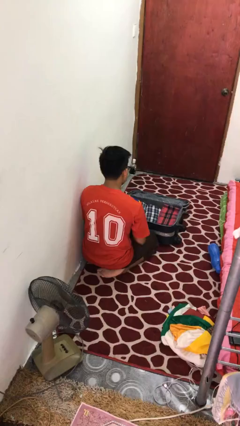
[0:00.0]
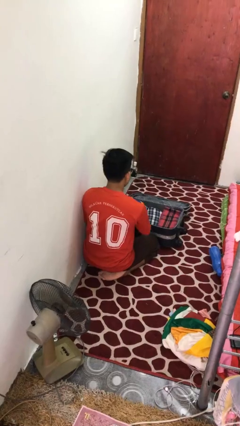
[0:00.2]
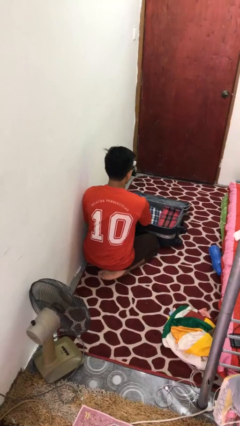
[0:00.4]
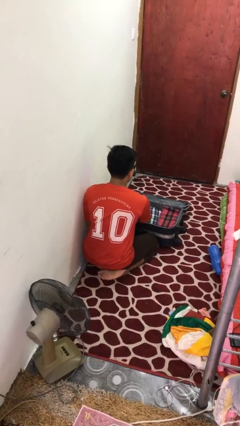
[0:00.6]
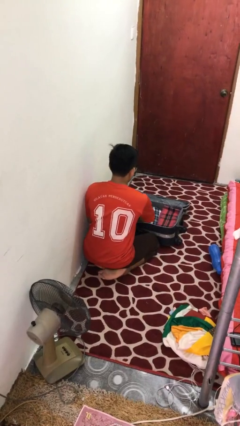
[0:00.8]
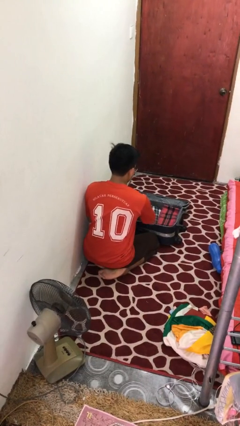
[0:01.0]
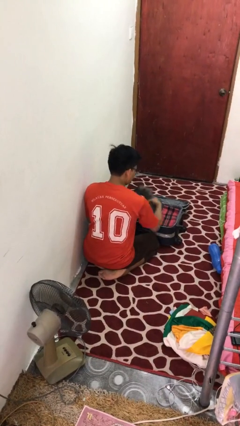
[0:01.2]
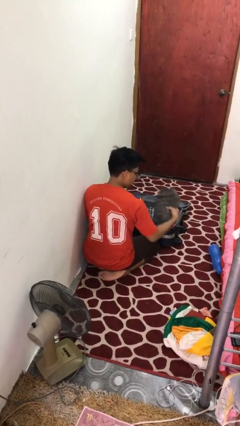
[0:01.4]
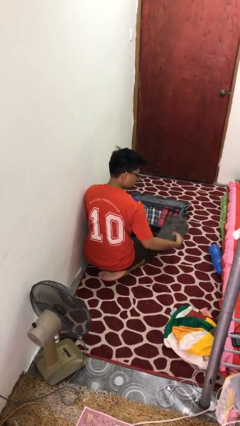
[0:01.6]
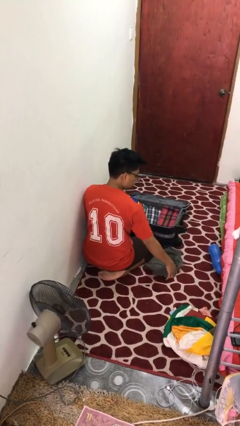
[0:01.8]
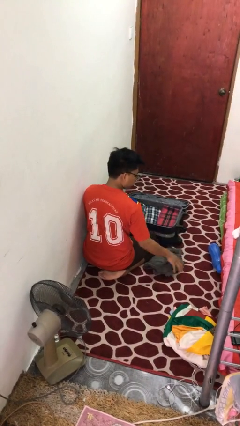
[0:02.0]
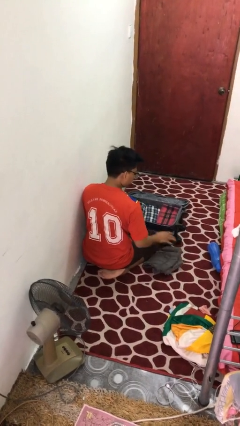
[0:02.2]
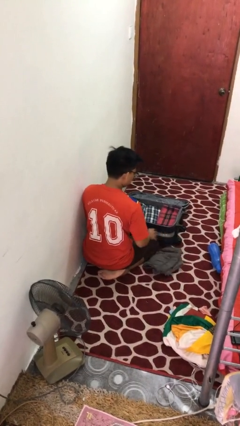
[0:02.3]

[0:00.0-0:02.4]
person unloads clothes from suitcase

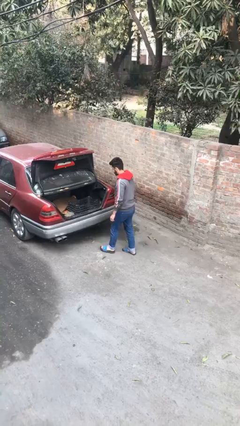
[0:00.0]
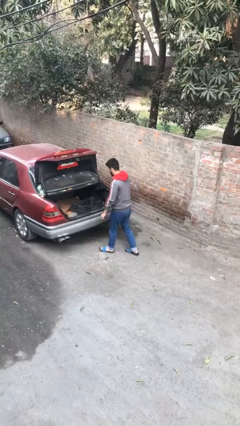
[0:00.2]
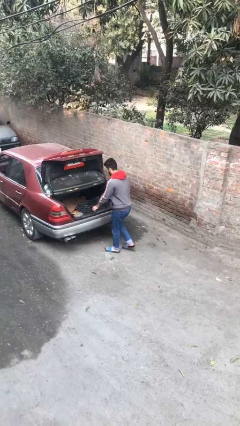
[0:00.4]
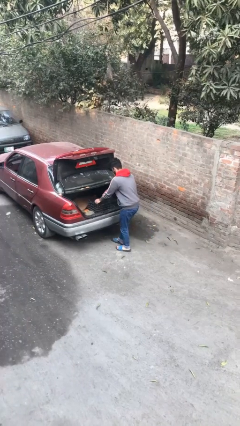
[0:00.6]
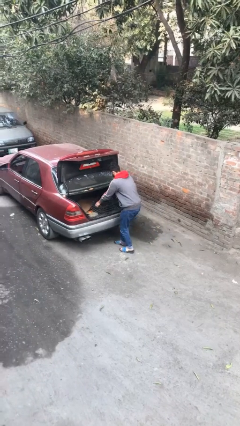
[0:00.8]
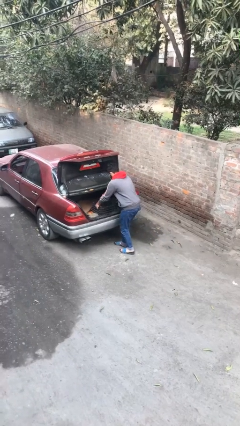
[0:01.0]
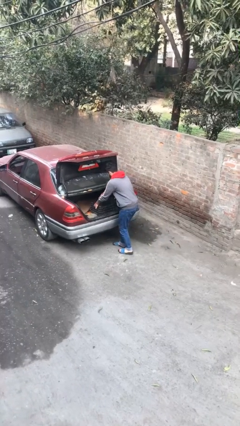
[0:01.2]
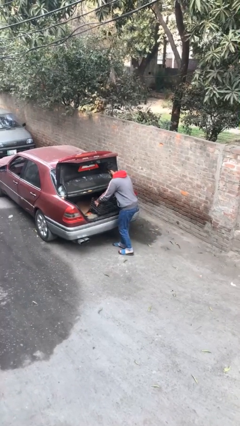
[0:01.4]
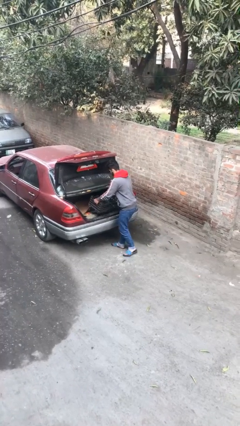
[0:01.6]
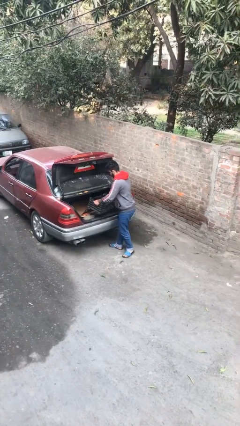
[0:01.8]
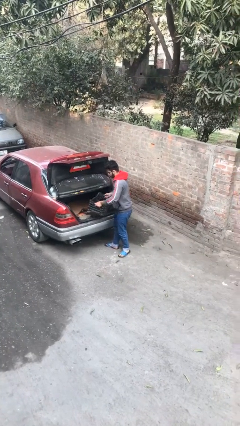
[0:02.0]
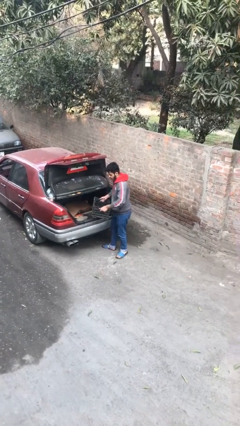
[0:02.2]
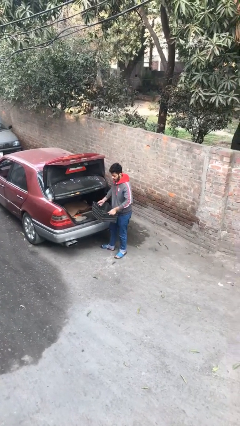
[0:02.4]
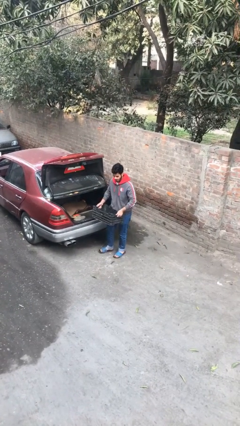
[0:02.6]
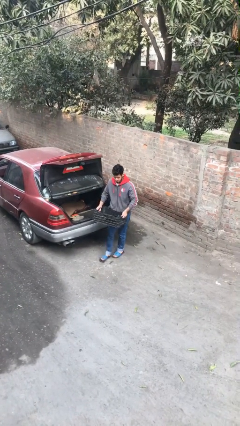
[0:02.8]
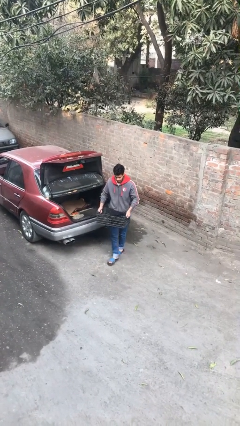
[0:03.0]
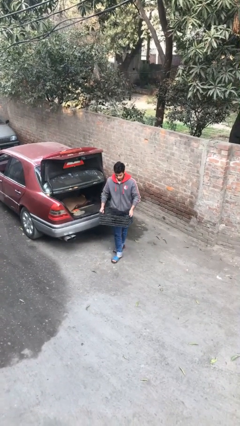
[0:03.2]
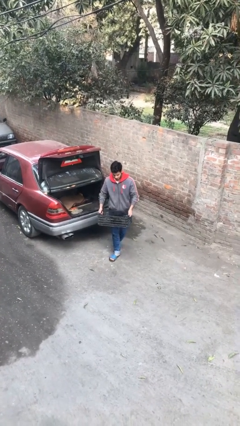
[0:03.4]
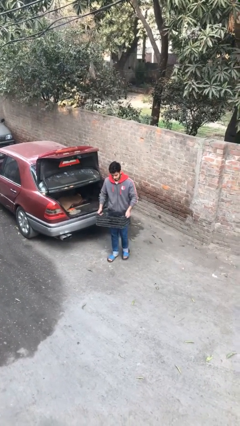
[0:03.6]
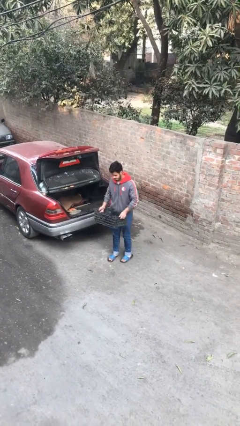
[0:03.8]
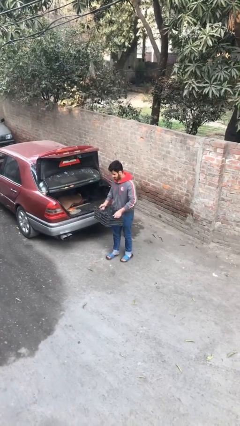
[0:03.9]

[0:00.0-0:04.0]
person unloads car

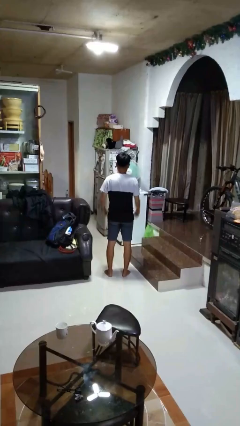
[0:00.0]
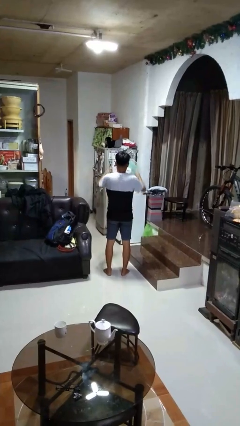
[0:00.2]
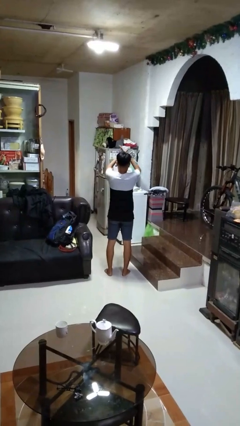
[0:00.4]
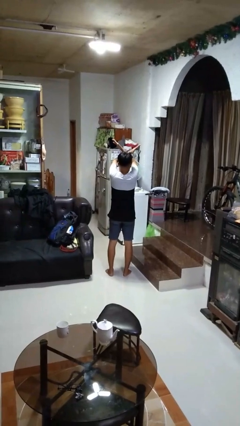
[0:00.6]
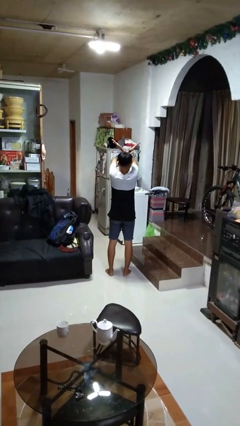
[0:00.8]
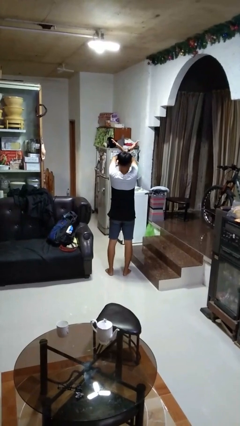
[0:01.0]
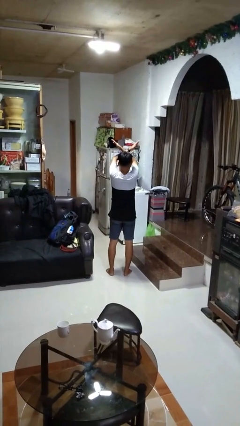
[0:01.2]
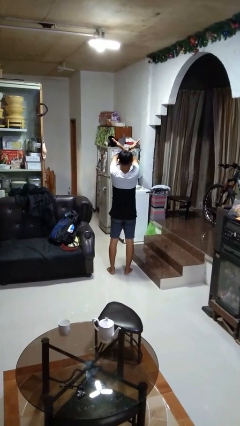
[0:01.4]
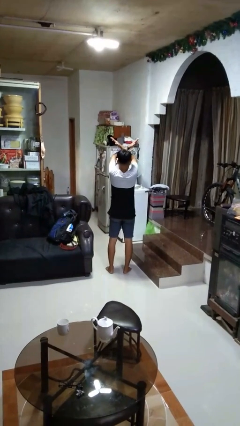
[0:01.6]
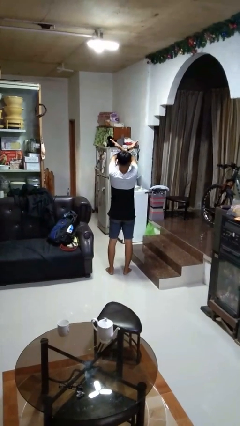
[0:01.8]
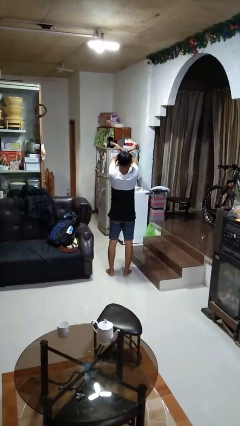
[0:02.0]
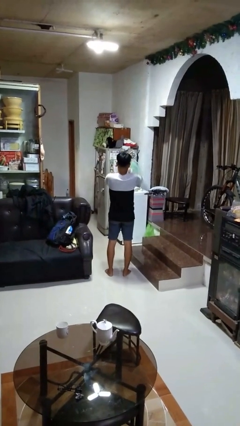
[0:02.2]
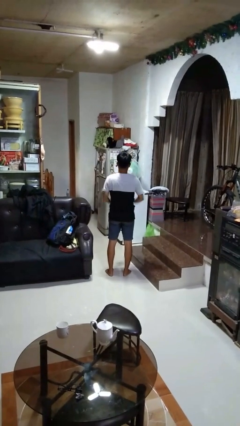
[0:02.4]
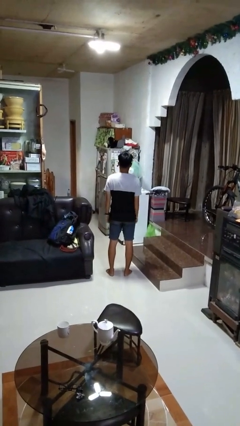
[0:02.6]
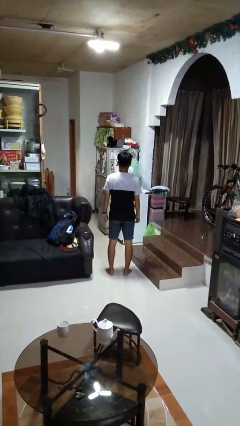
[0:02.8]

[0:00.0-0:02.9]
person gestures arms x

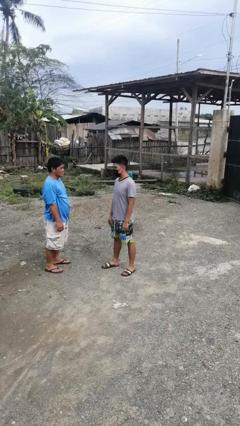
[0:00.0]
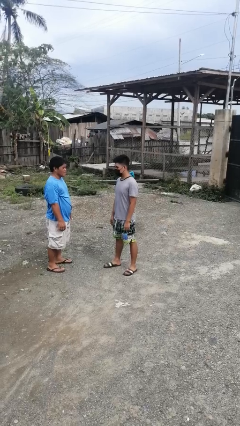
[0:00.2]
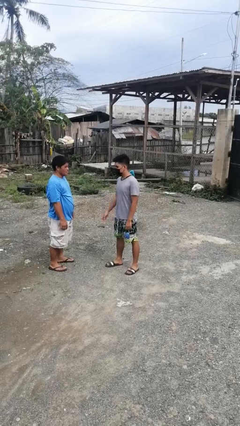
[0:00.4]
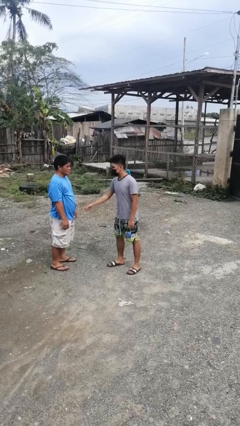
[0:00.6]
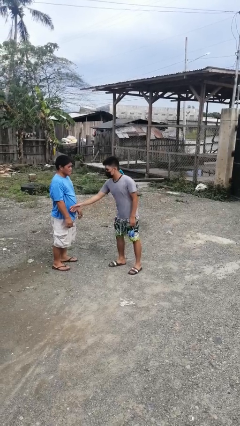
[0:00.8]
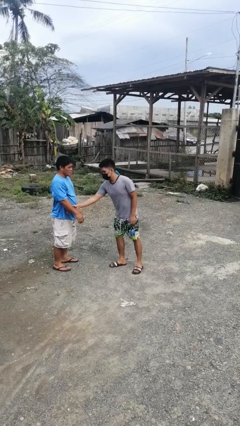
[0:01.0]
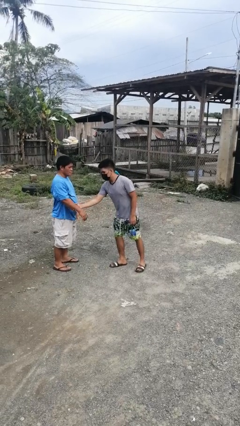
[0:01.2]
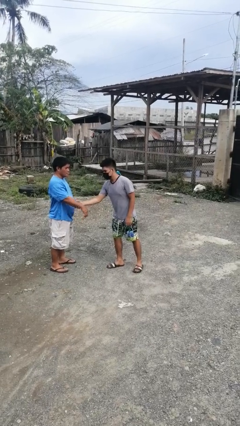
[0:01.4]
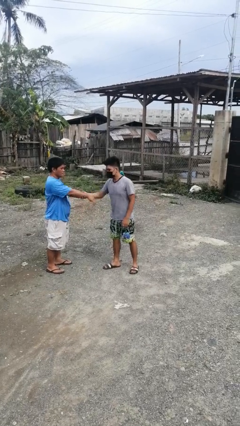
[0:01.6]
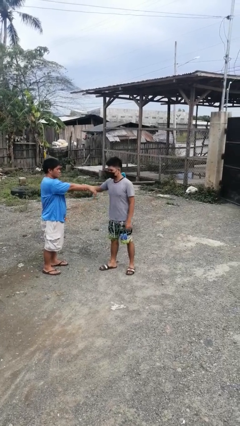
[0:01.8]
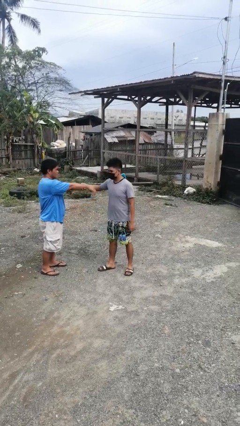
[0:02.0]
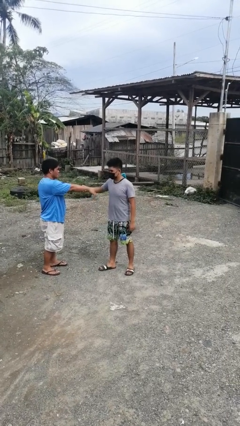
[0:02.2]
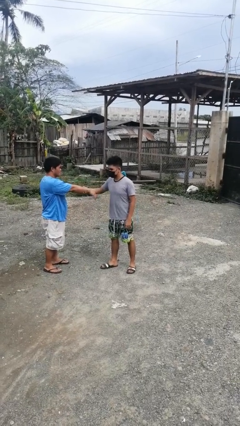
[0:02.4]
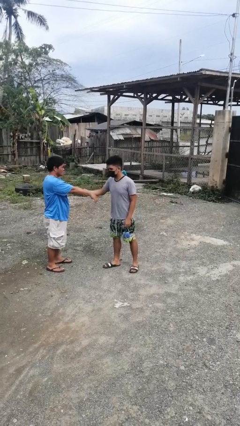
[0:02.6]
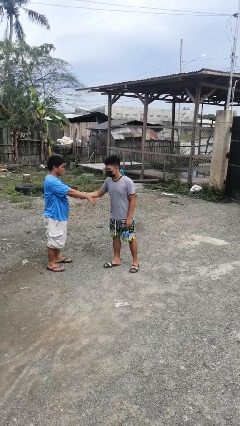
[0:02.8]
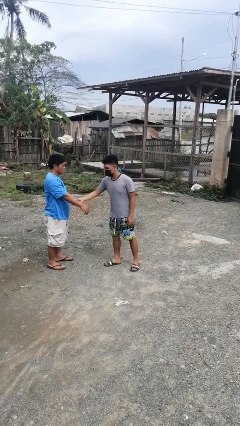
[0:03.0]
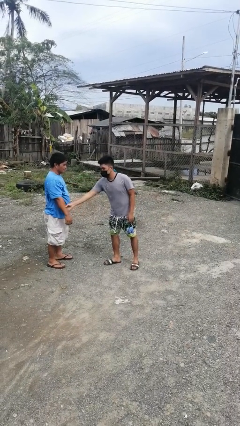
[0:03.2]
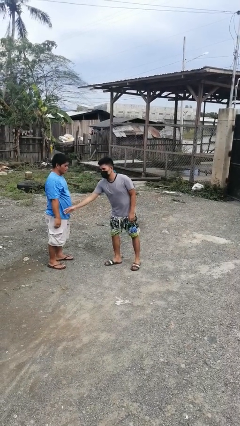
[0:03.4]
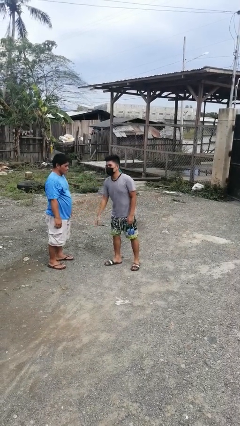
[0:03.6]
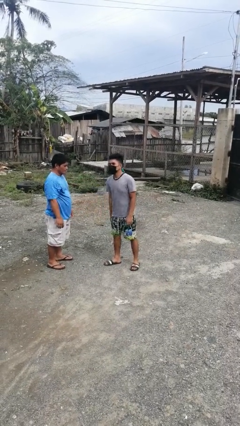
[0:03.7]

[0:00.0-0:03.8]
person grabs person by forearm

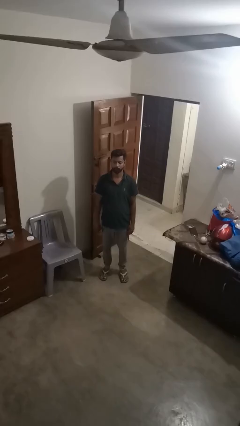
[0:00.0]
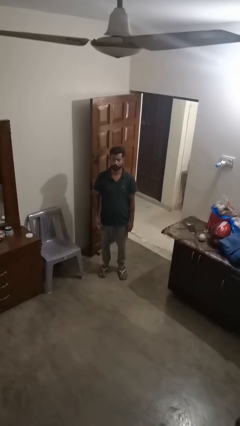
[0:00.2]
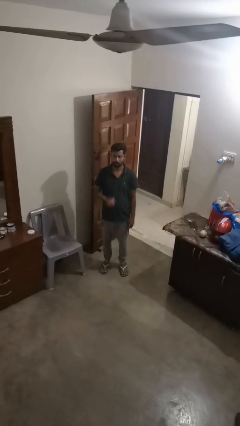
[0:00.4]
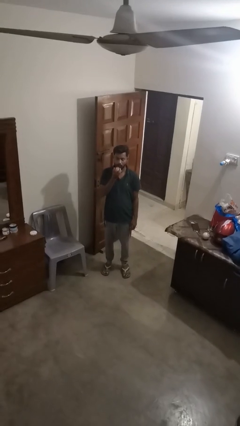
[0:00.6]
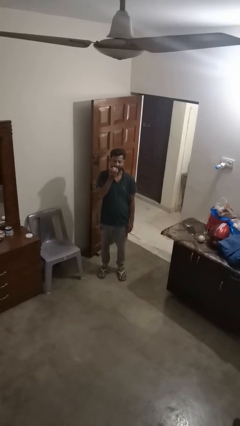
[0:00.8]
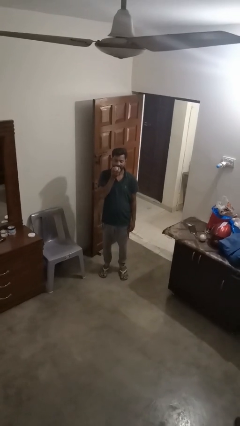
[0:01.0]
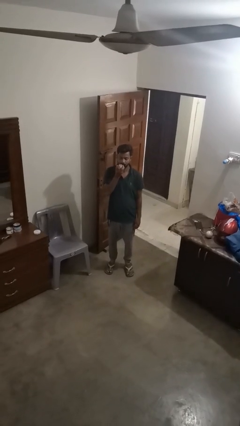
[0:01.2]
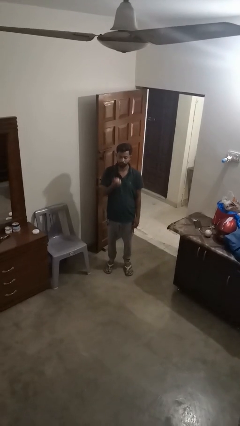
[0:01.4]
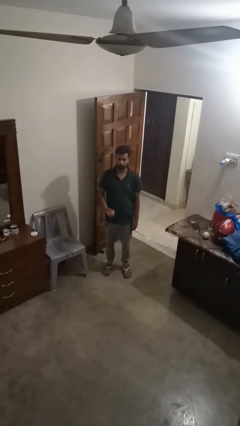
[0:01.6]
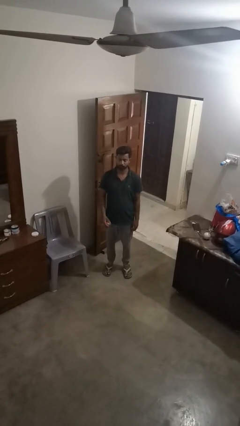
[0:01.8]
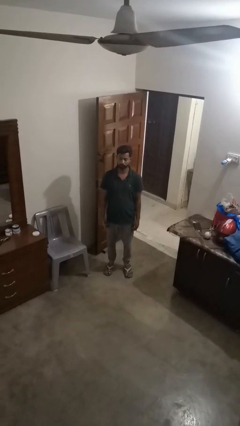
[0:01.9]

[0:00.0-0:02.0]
person eats apple

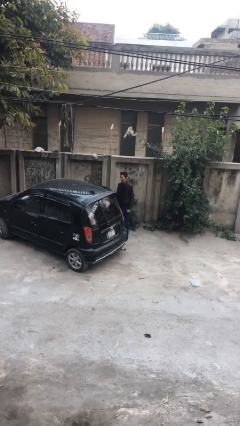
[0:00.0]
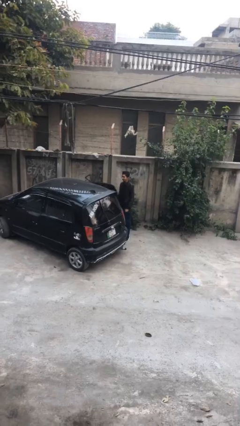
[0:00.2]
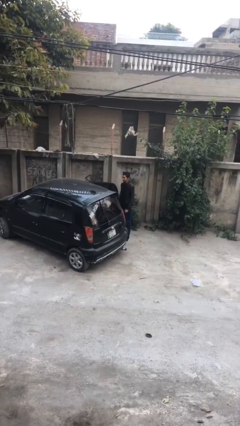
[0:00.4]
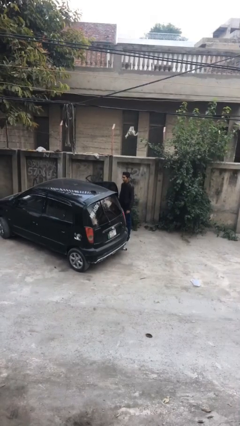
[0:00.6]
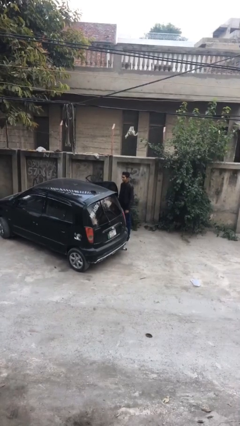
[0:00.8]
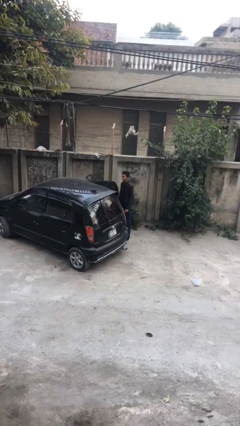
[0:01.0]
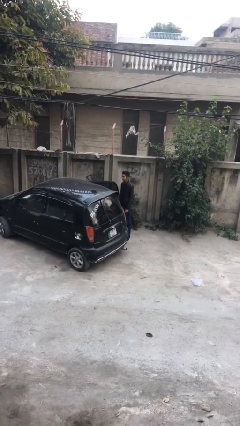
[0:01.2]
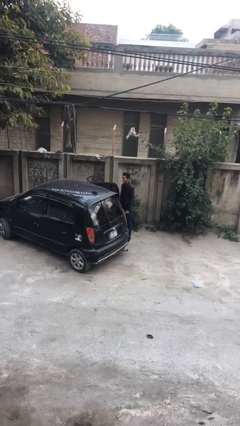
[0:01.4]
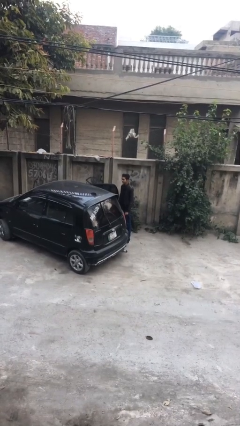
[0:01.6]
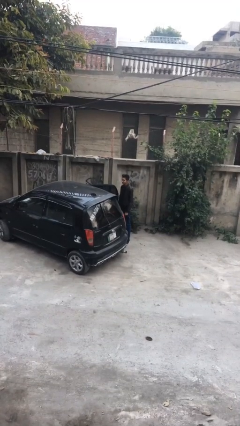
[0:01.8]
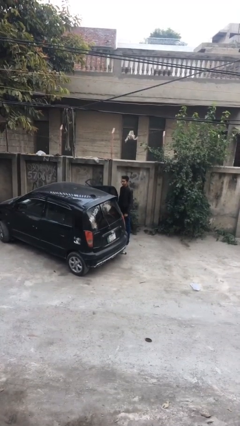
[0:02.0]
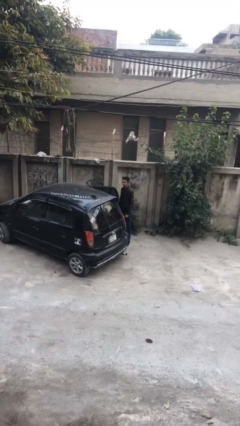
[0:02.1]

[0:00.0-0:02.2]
person opens car door
